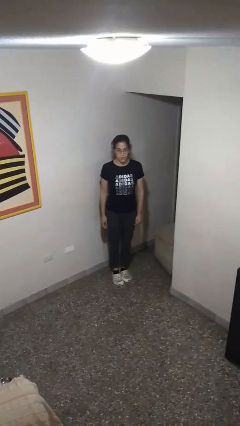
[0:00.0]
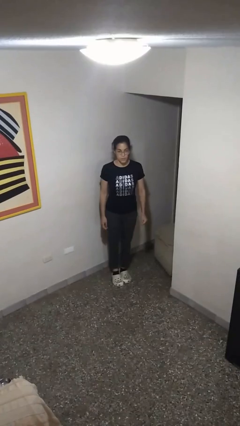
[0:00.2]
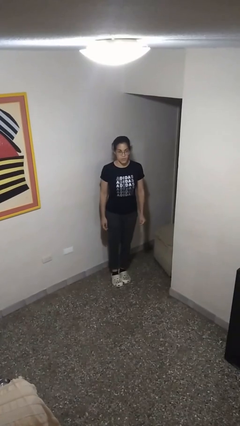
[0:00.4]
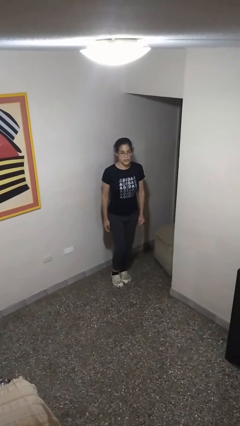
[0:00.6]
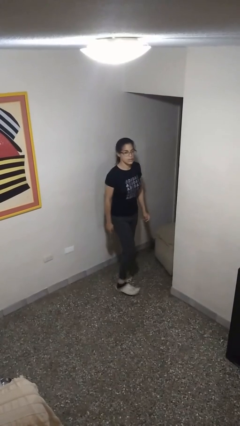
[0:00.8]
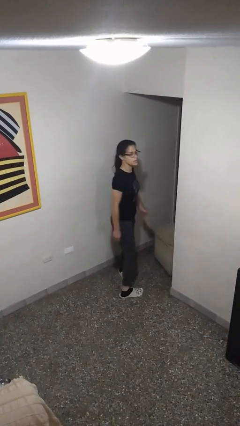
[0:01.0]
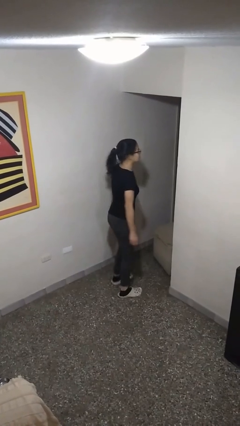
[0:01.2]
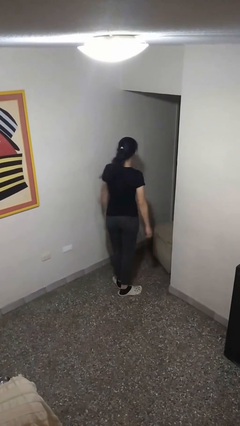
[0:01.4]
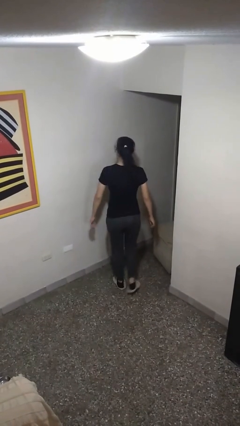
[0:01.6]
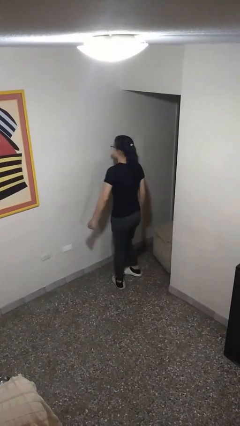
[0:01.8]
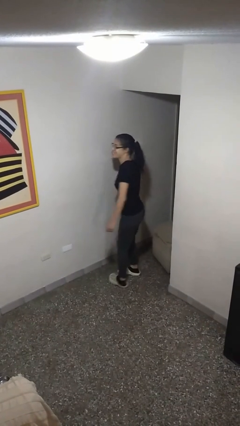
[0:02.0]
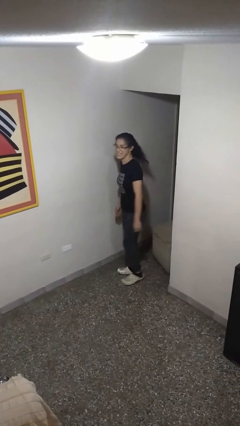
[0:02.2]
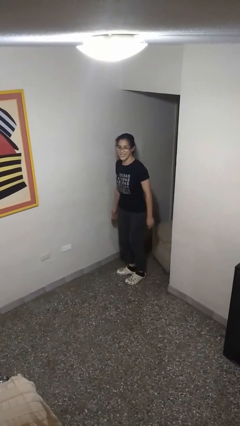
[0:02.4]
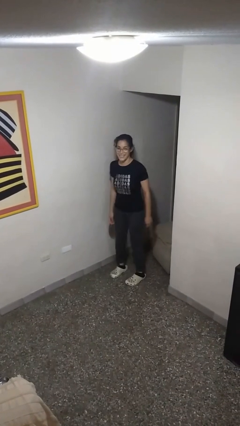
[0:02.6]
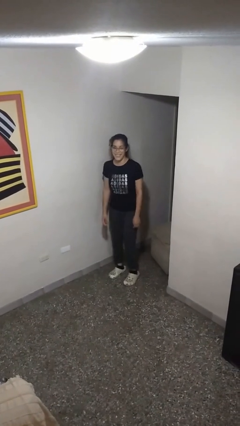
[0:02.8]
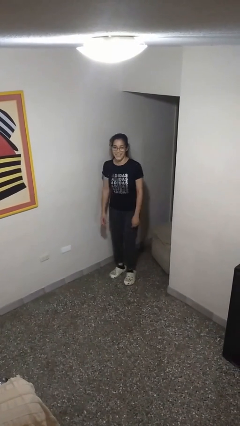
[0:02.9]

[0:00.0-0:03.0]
person twirls

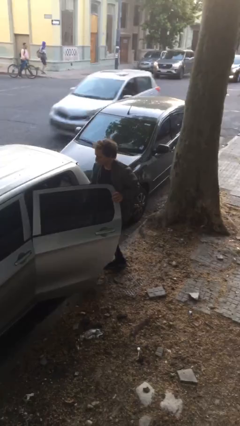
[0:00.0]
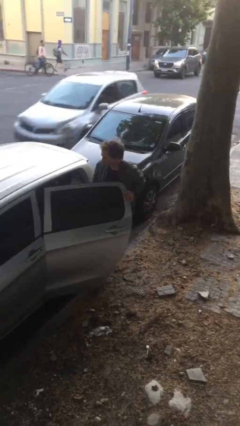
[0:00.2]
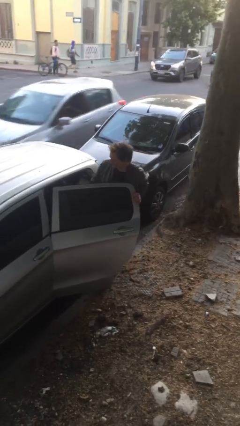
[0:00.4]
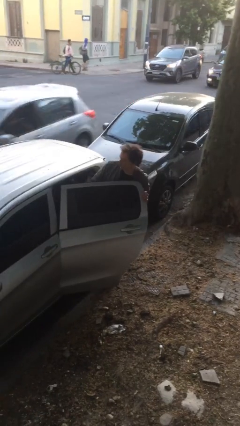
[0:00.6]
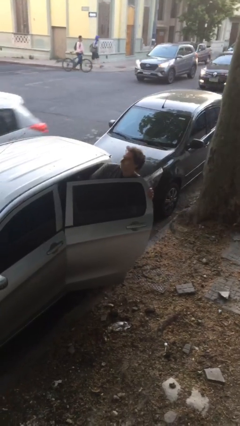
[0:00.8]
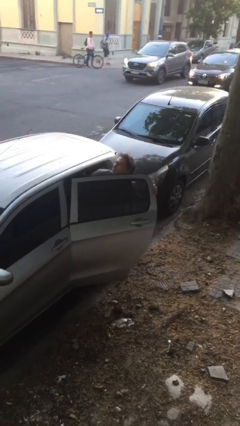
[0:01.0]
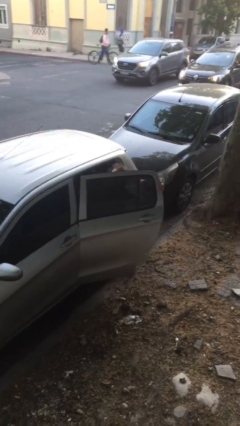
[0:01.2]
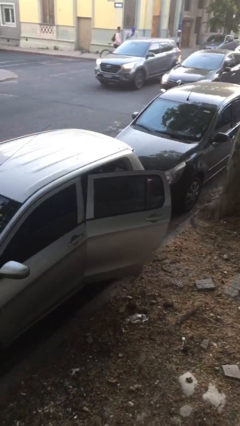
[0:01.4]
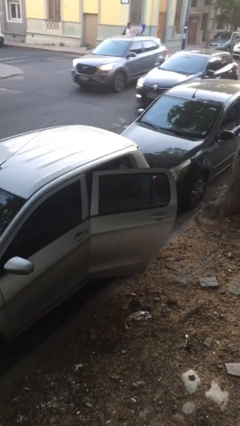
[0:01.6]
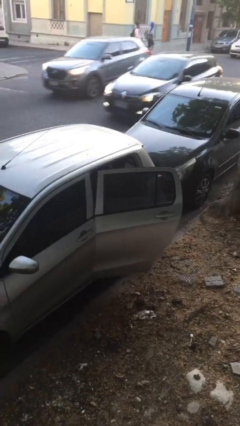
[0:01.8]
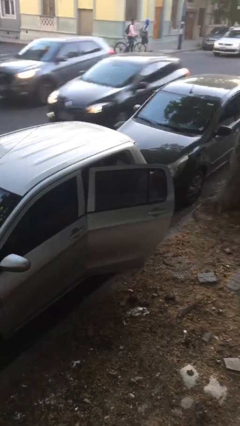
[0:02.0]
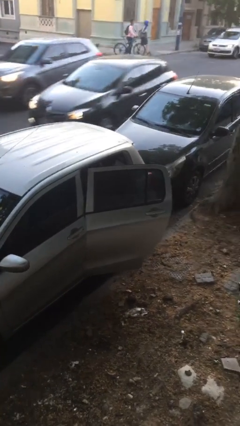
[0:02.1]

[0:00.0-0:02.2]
person enters car

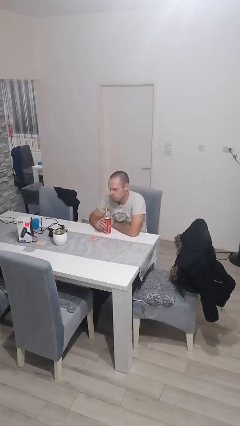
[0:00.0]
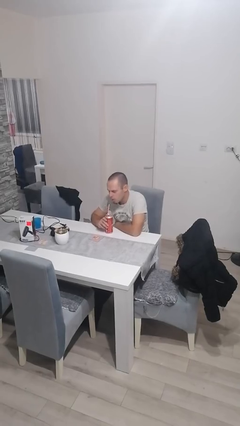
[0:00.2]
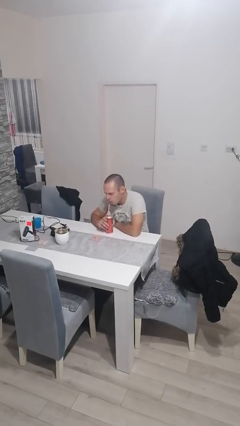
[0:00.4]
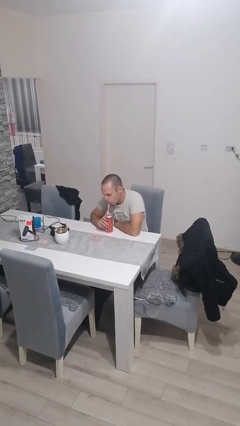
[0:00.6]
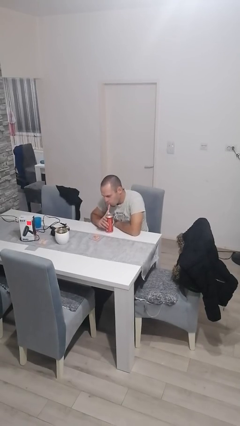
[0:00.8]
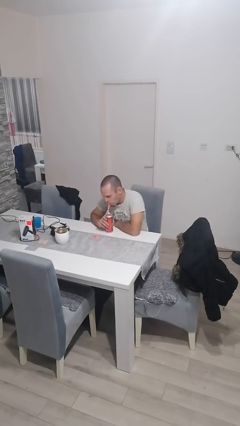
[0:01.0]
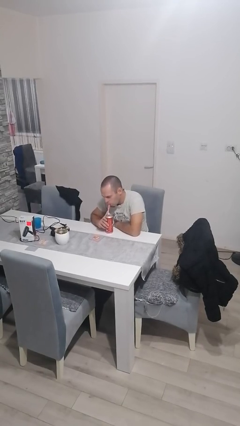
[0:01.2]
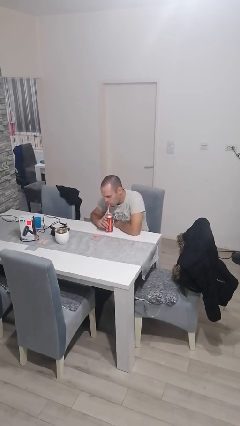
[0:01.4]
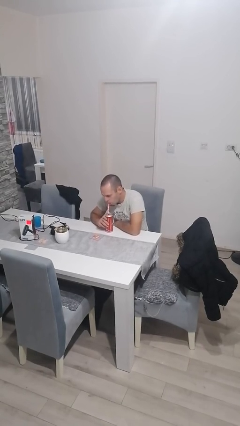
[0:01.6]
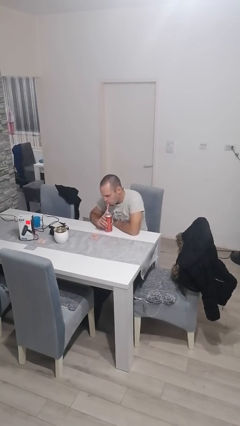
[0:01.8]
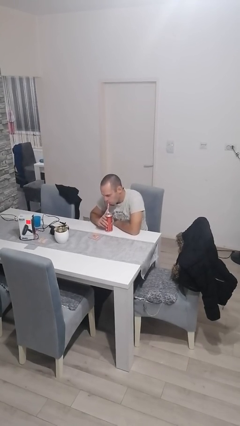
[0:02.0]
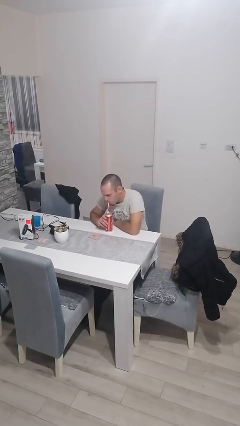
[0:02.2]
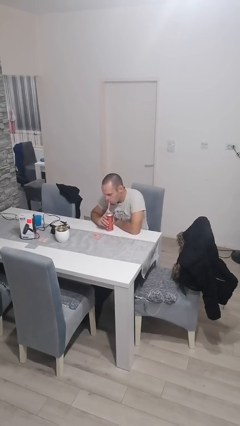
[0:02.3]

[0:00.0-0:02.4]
person drinks from straw

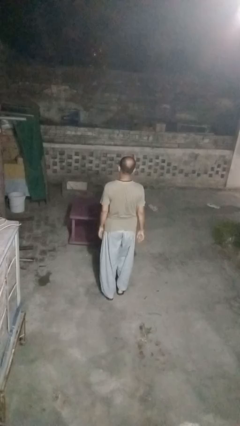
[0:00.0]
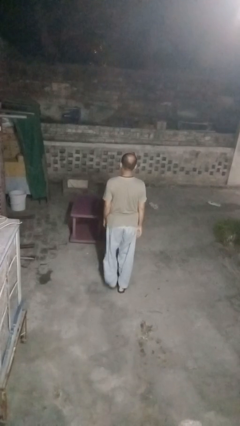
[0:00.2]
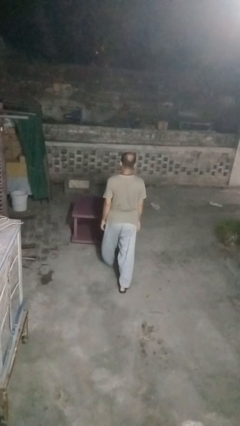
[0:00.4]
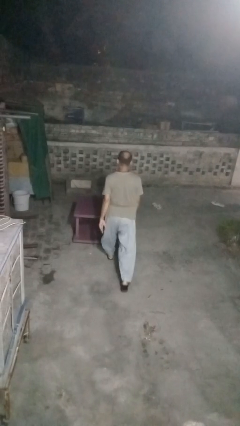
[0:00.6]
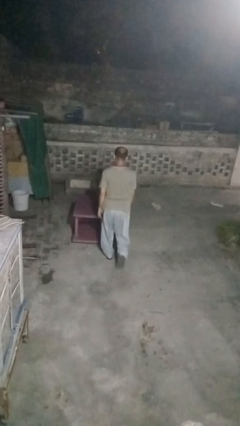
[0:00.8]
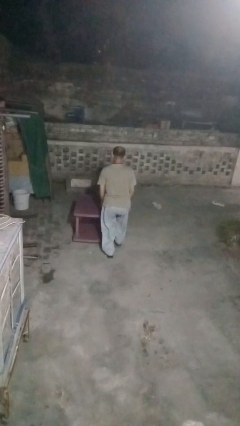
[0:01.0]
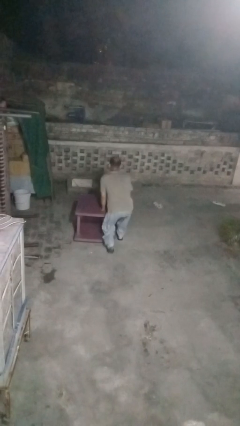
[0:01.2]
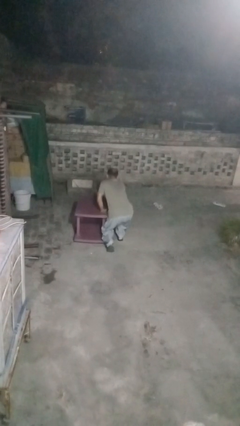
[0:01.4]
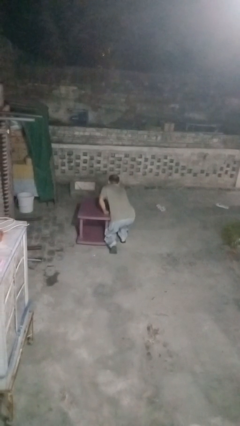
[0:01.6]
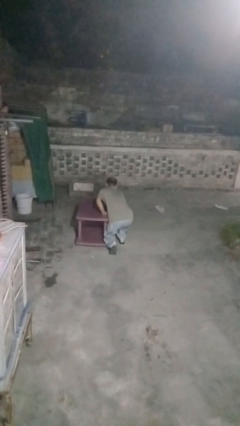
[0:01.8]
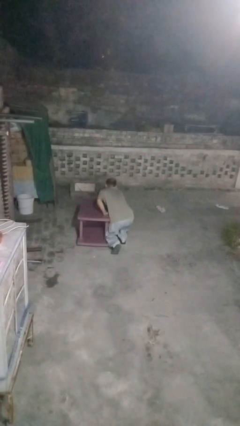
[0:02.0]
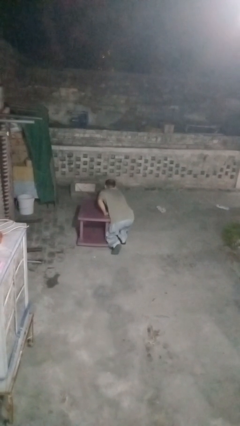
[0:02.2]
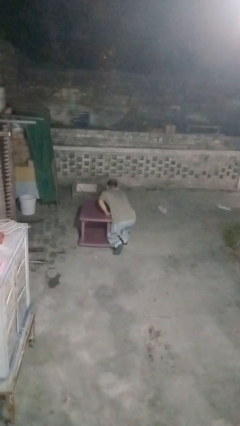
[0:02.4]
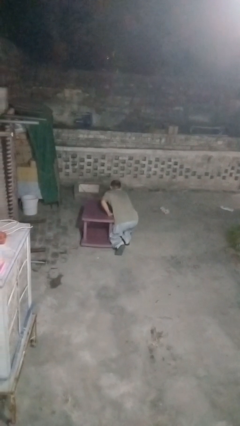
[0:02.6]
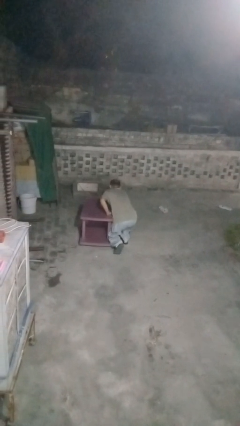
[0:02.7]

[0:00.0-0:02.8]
person bumps into table

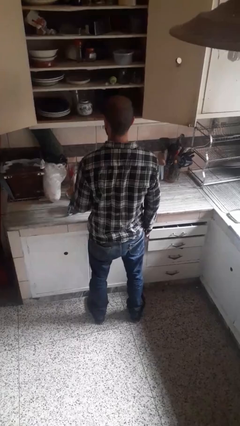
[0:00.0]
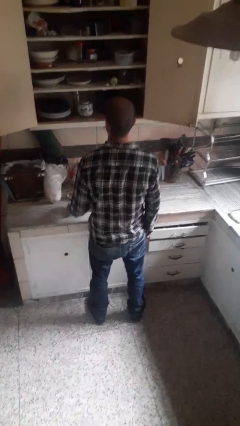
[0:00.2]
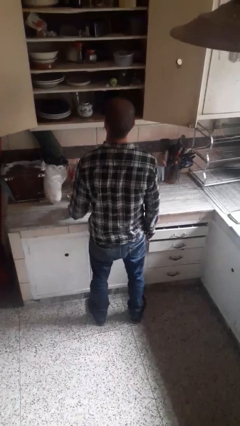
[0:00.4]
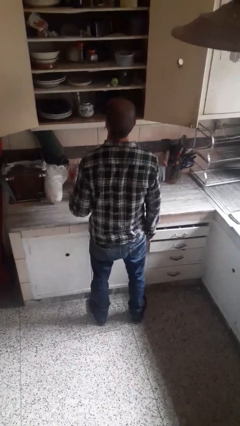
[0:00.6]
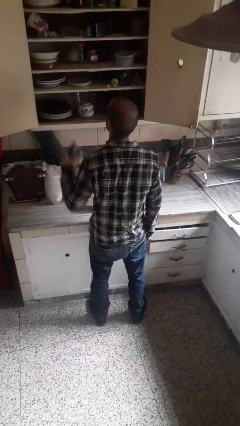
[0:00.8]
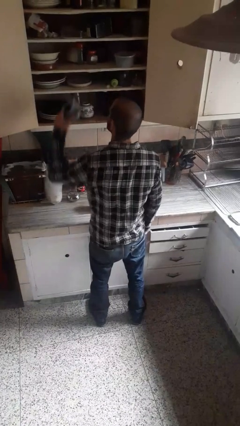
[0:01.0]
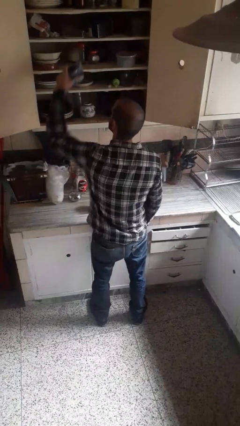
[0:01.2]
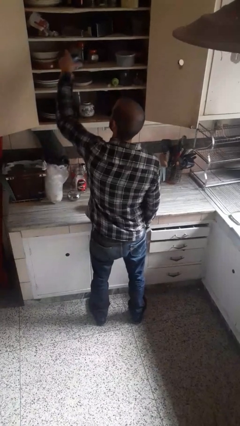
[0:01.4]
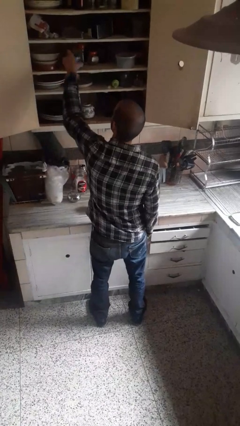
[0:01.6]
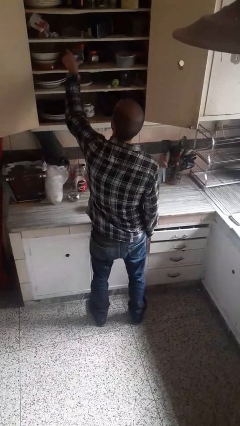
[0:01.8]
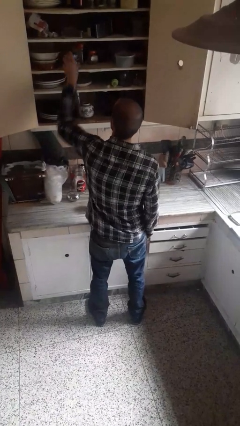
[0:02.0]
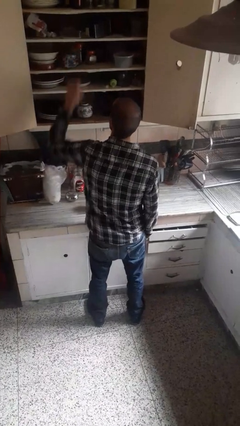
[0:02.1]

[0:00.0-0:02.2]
person puts object in cabinet

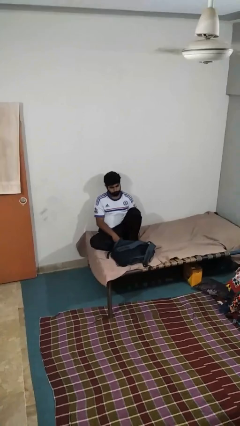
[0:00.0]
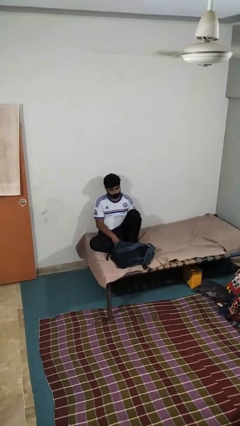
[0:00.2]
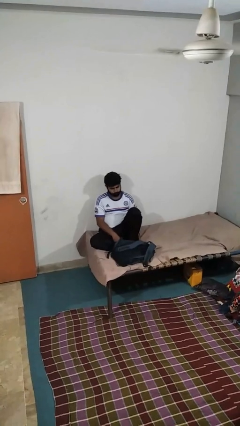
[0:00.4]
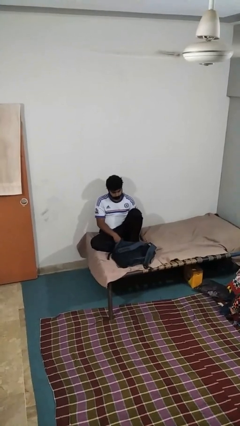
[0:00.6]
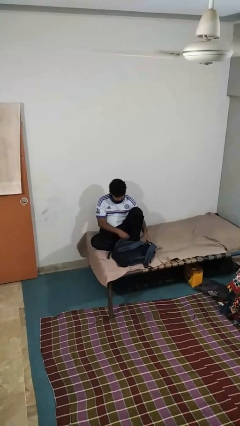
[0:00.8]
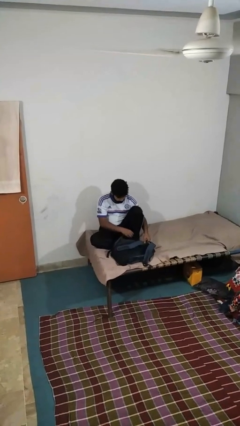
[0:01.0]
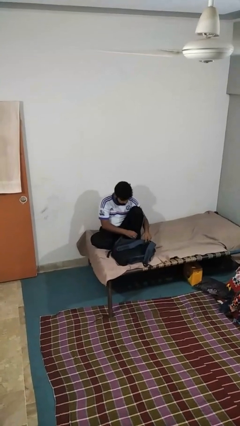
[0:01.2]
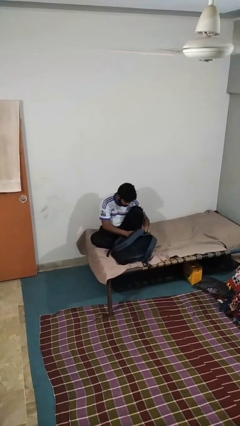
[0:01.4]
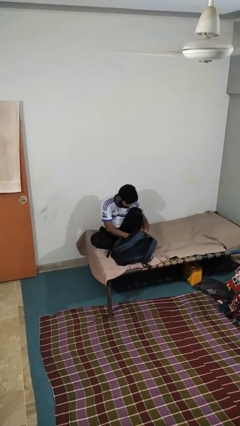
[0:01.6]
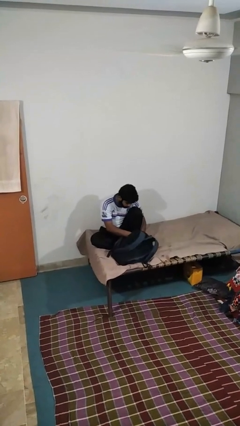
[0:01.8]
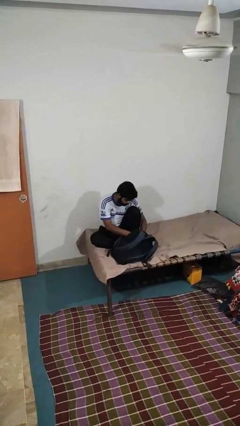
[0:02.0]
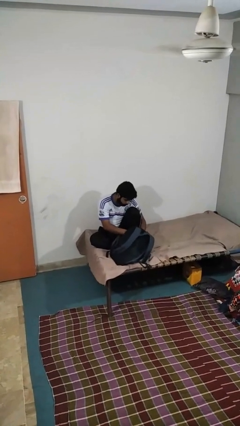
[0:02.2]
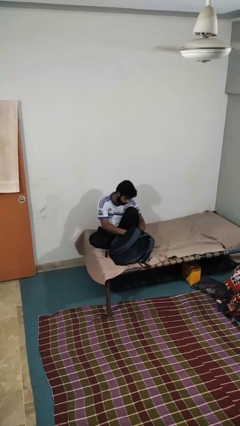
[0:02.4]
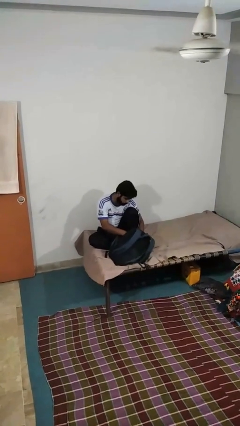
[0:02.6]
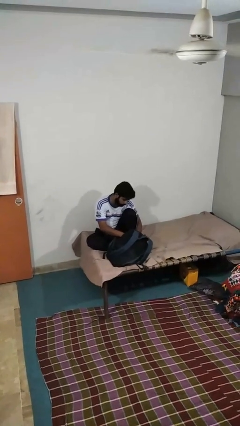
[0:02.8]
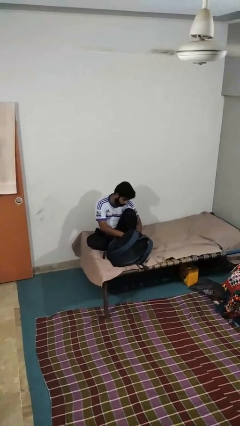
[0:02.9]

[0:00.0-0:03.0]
person searches in backpack

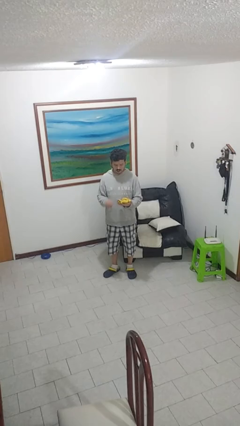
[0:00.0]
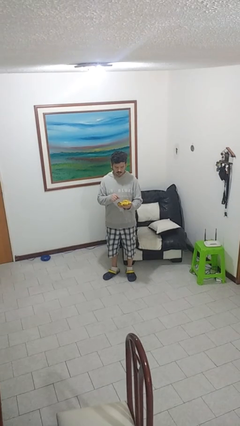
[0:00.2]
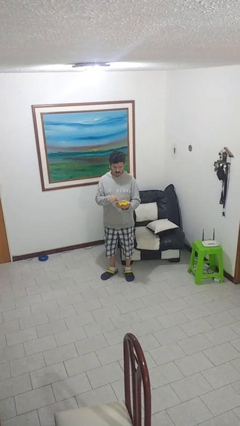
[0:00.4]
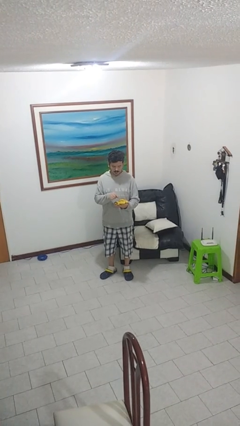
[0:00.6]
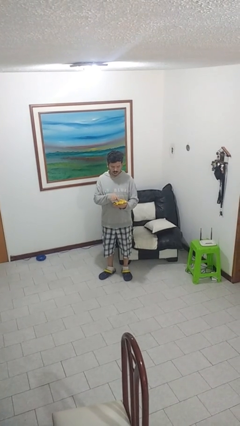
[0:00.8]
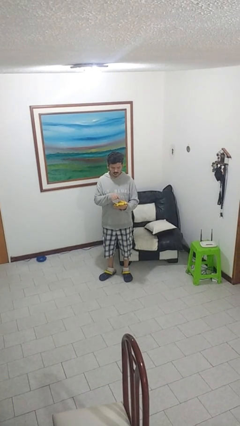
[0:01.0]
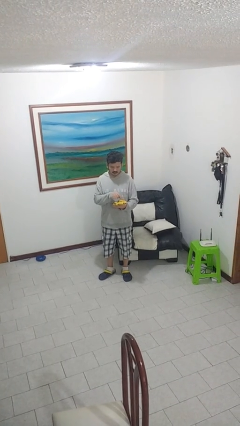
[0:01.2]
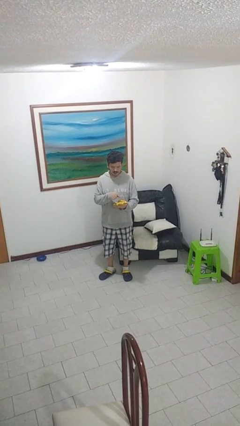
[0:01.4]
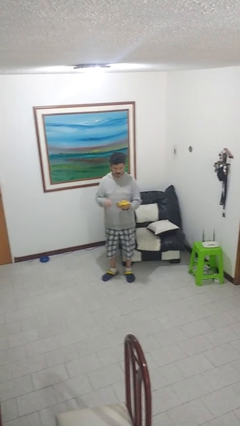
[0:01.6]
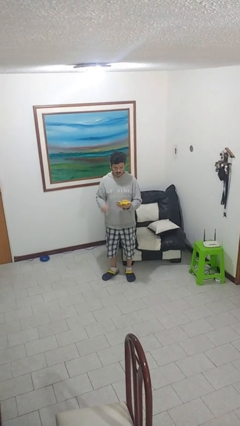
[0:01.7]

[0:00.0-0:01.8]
person taps object with finger
